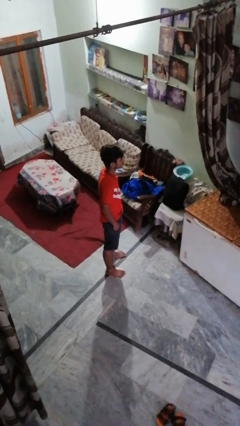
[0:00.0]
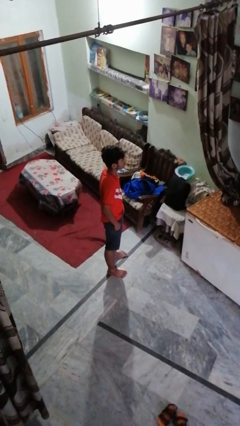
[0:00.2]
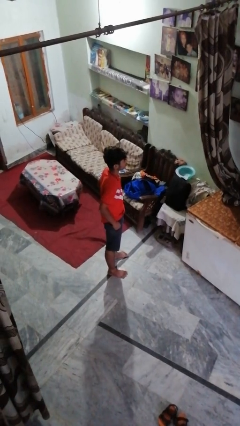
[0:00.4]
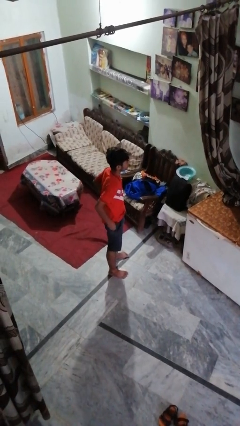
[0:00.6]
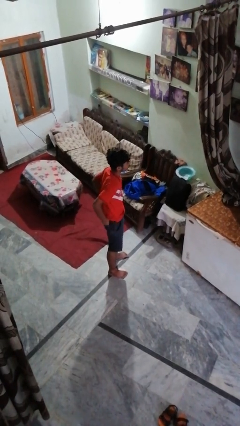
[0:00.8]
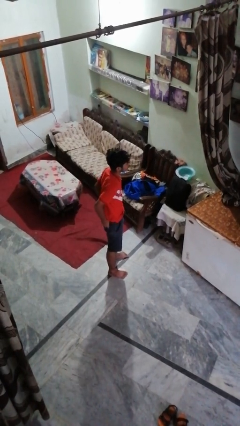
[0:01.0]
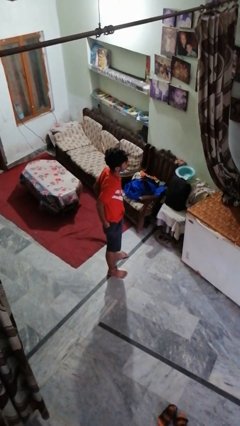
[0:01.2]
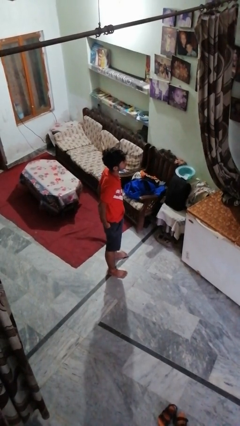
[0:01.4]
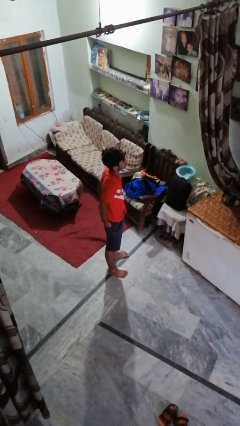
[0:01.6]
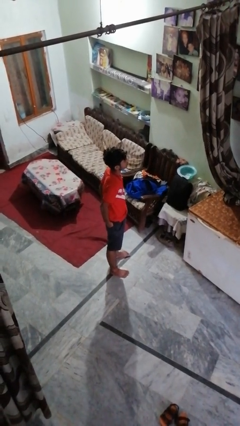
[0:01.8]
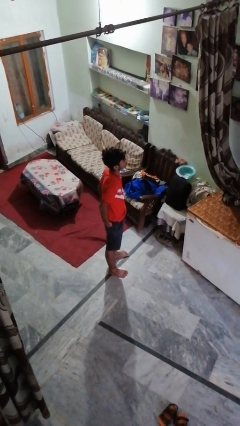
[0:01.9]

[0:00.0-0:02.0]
person puts hands in back pockets

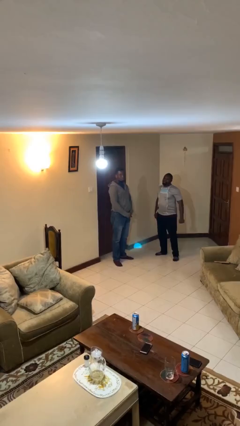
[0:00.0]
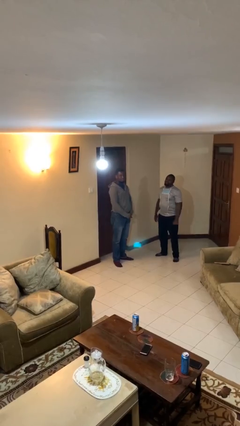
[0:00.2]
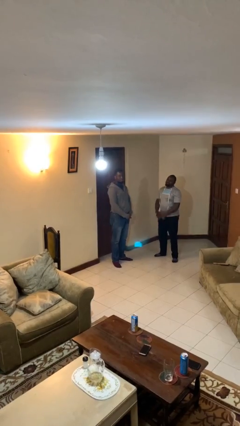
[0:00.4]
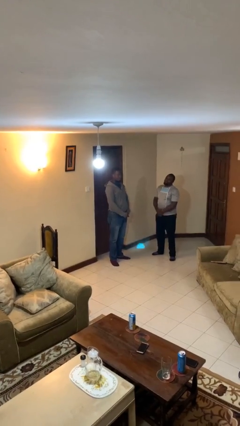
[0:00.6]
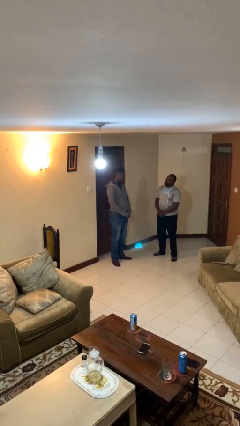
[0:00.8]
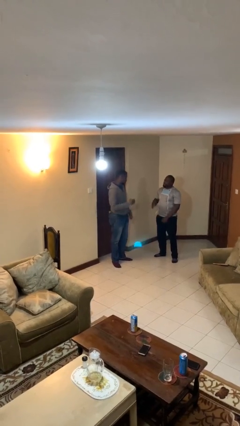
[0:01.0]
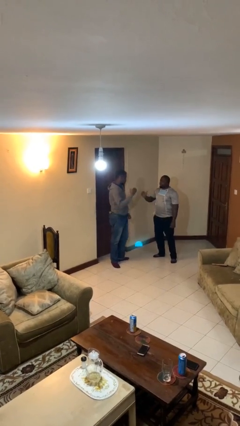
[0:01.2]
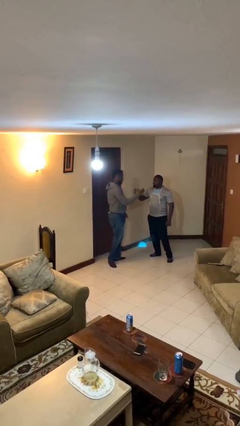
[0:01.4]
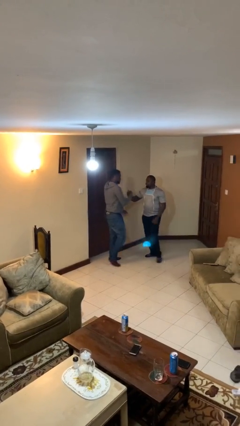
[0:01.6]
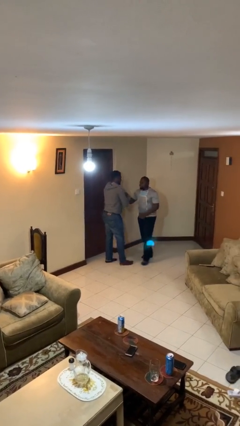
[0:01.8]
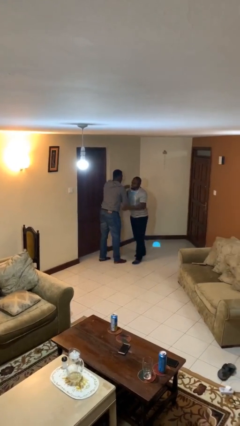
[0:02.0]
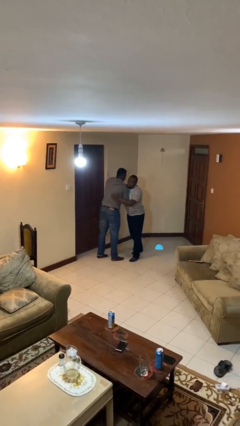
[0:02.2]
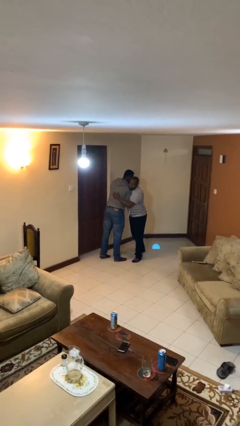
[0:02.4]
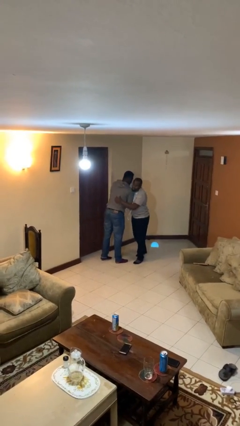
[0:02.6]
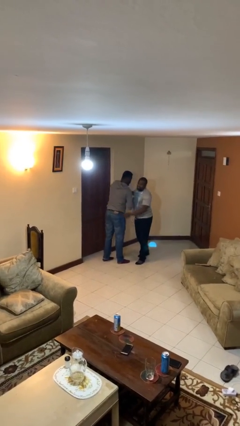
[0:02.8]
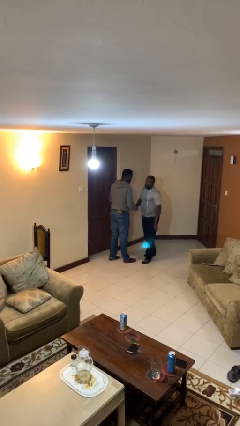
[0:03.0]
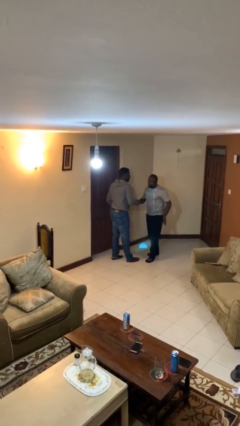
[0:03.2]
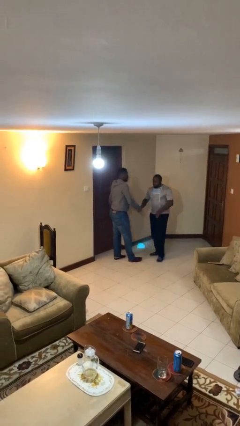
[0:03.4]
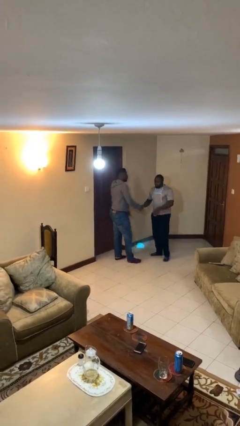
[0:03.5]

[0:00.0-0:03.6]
person embraces person

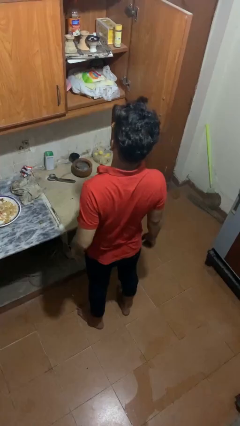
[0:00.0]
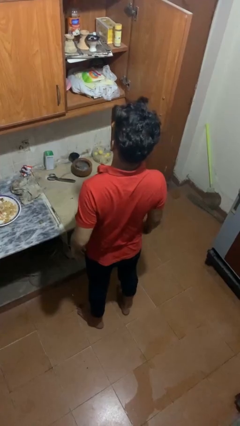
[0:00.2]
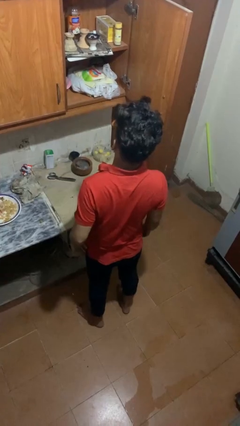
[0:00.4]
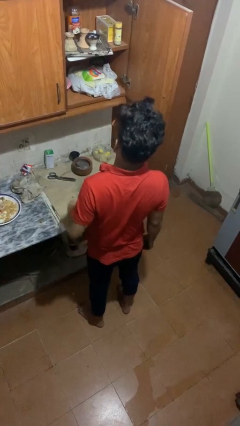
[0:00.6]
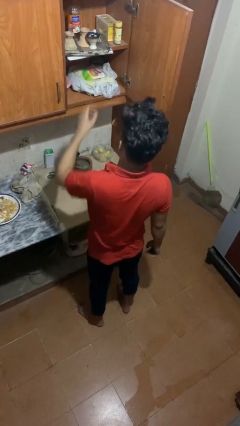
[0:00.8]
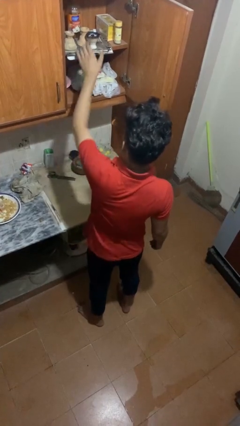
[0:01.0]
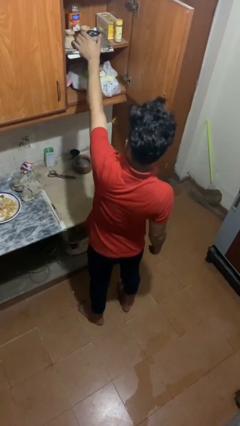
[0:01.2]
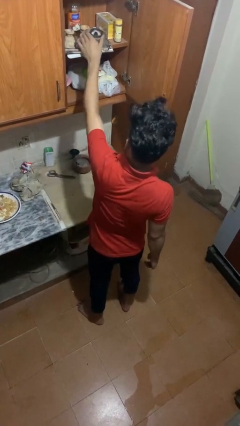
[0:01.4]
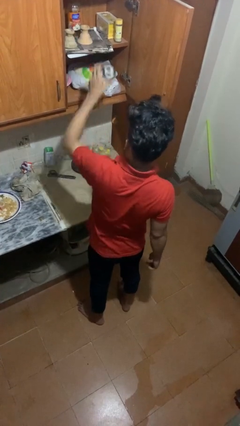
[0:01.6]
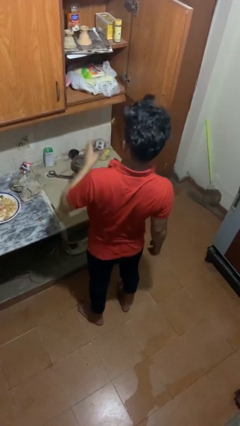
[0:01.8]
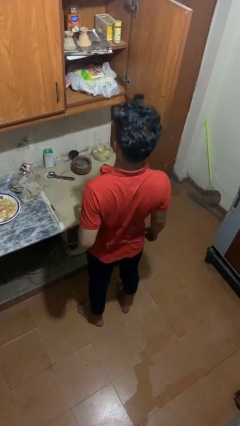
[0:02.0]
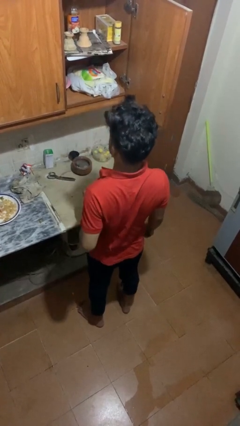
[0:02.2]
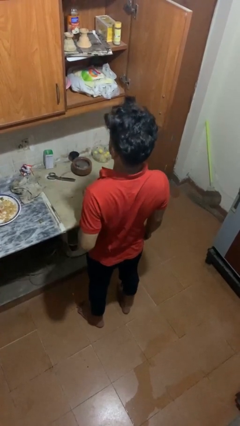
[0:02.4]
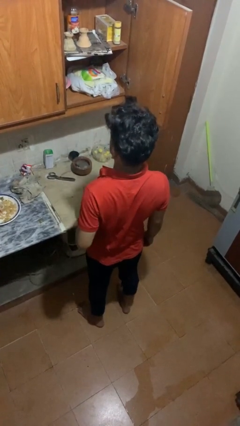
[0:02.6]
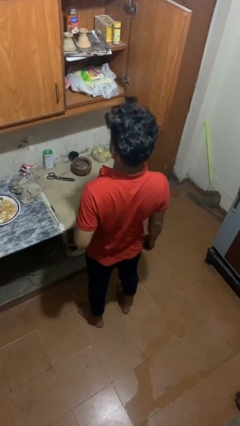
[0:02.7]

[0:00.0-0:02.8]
person takes object from cabinet

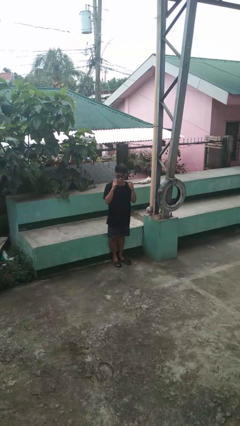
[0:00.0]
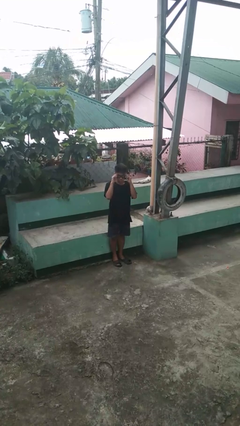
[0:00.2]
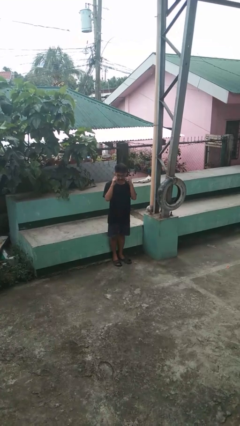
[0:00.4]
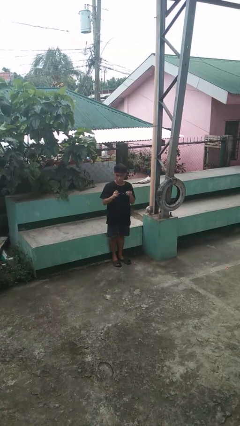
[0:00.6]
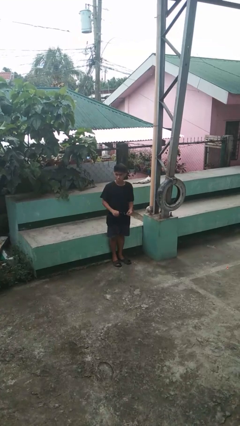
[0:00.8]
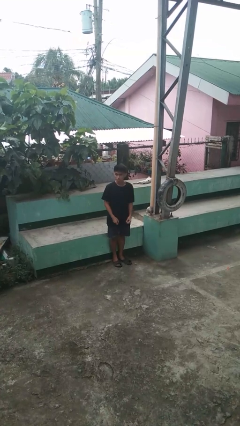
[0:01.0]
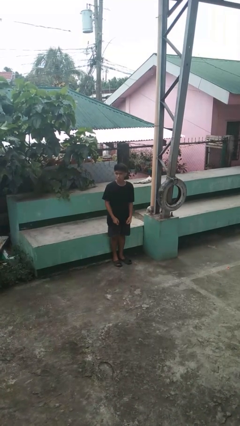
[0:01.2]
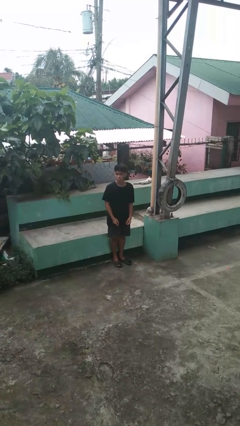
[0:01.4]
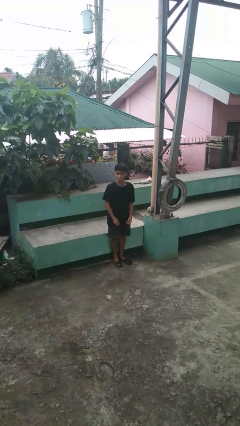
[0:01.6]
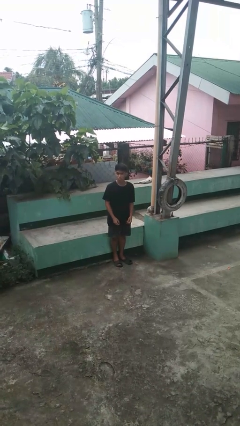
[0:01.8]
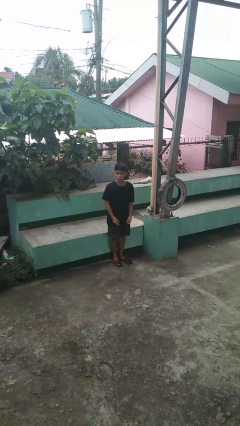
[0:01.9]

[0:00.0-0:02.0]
person takes off sunglasses

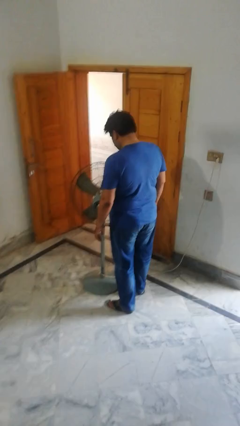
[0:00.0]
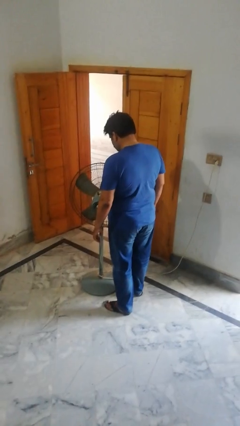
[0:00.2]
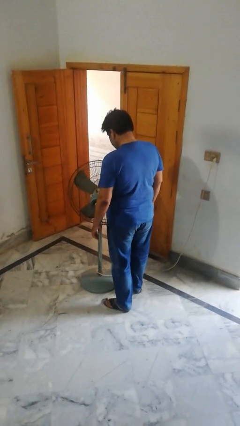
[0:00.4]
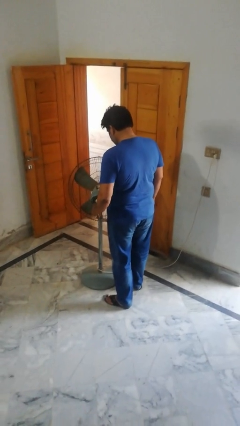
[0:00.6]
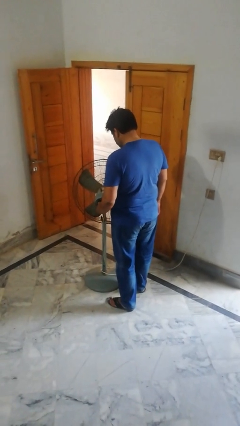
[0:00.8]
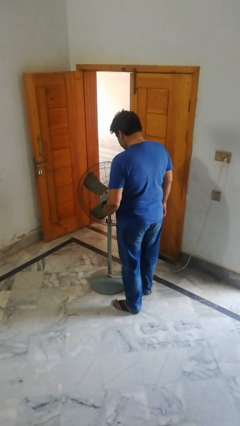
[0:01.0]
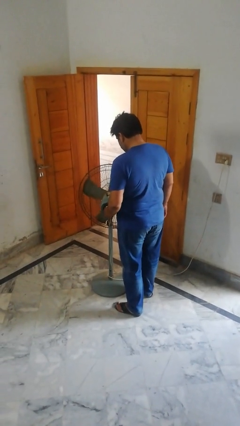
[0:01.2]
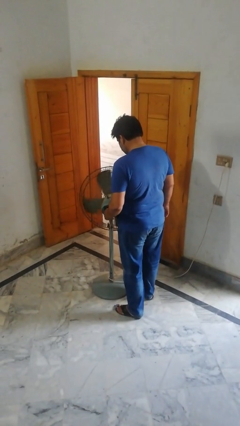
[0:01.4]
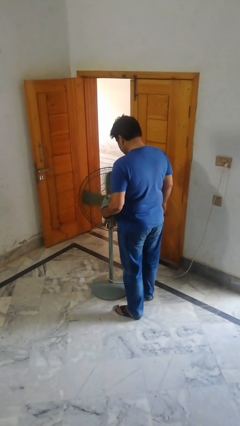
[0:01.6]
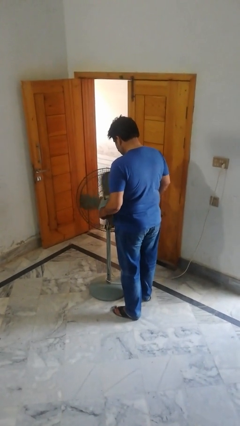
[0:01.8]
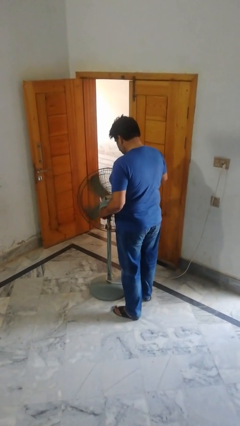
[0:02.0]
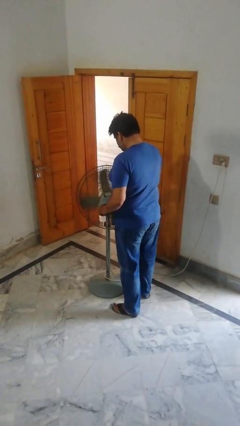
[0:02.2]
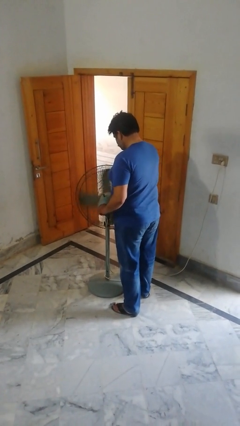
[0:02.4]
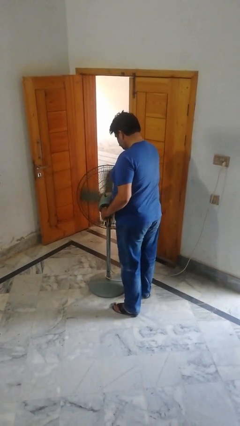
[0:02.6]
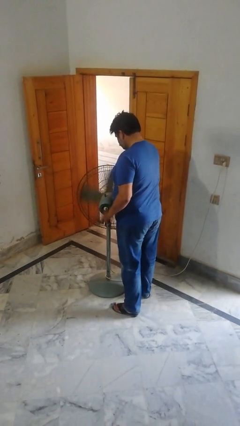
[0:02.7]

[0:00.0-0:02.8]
person turns on fan

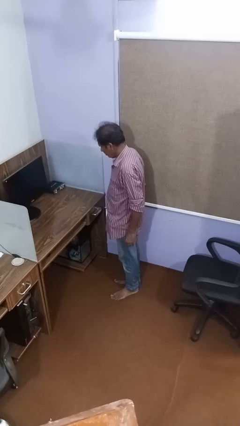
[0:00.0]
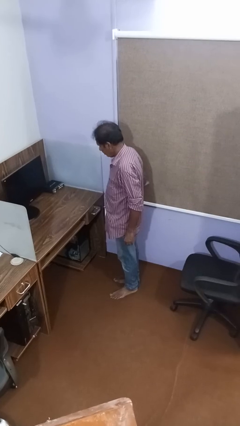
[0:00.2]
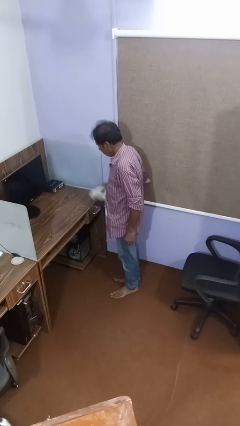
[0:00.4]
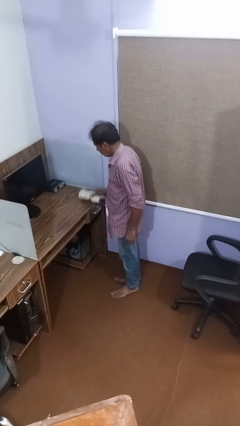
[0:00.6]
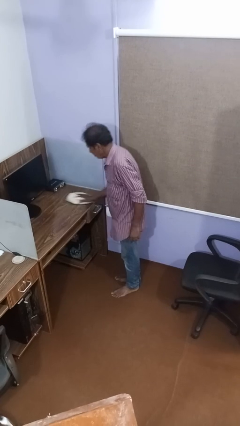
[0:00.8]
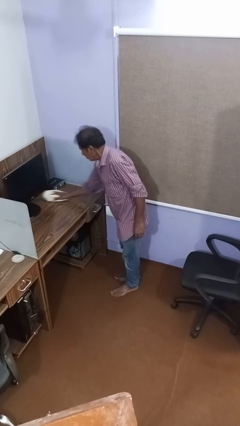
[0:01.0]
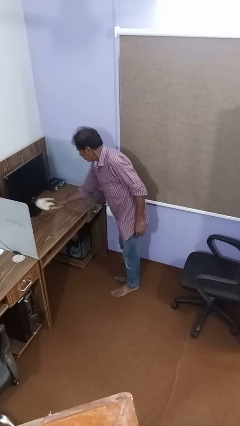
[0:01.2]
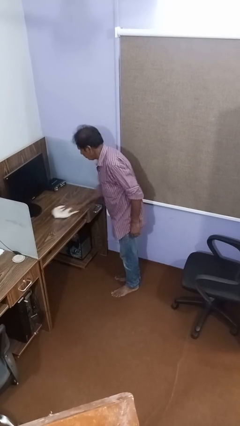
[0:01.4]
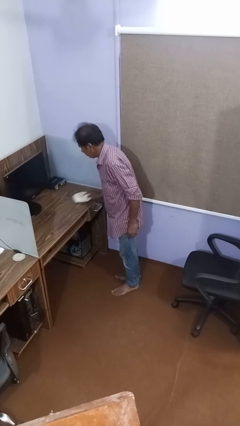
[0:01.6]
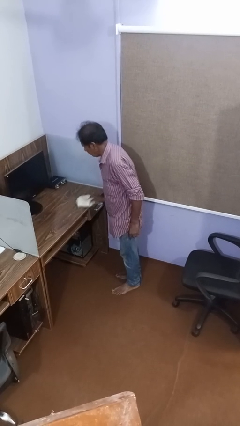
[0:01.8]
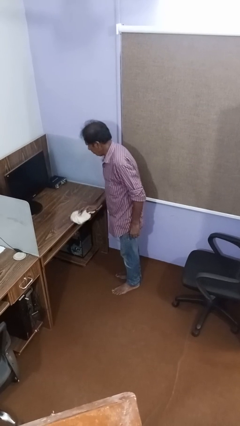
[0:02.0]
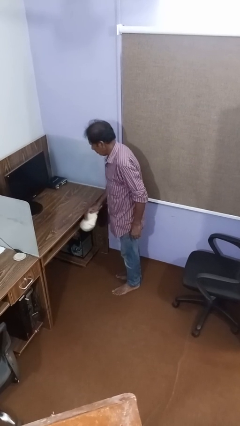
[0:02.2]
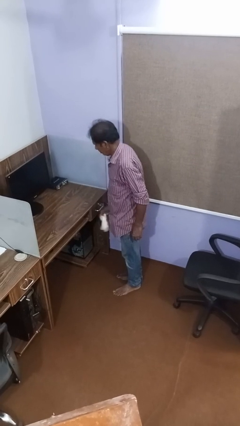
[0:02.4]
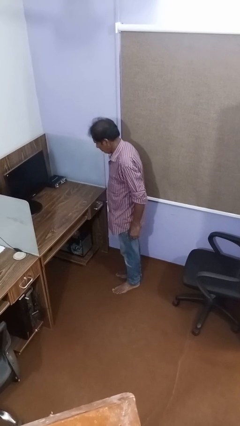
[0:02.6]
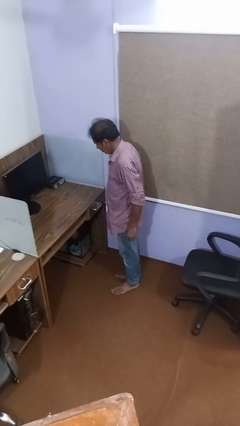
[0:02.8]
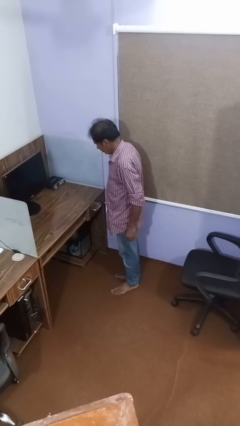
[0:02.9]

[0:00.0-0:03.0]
person cleans table with rag

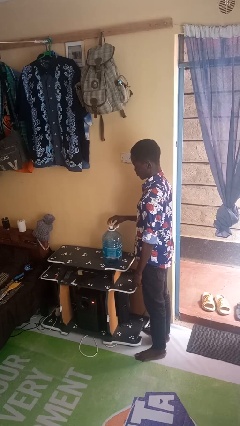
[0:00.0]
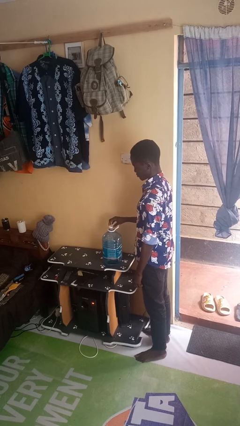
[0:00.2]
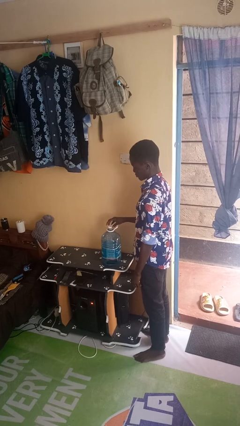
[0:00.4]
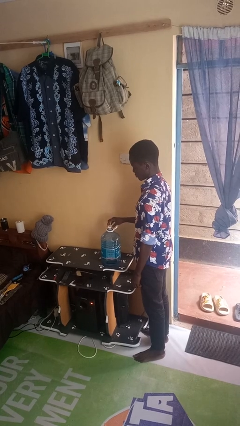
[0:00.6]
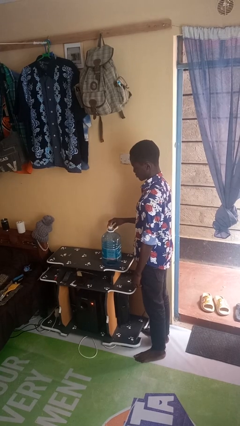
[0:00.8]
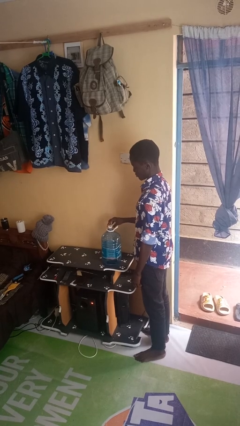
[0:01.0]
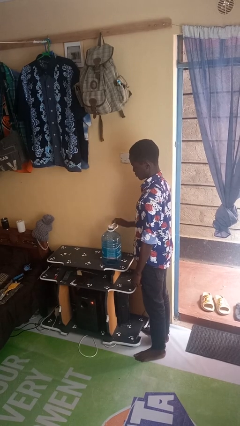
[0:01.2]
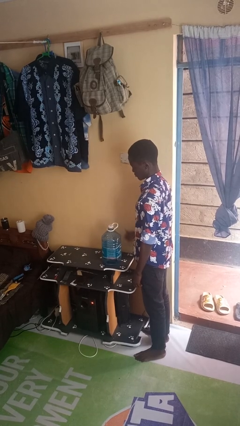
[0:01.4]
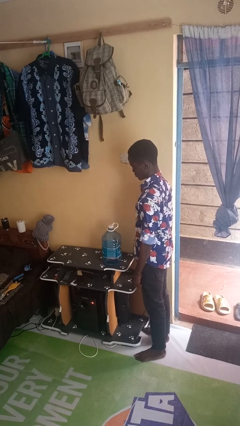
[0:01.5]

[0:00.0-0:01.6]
person screws lid to bottle
